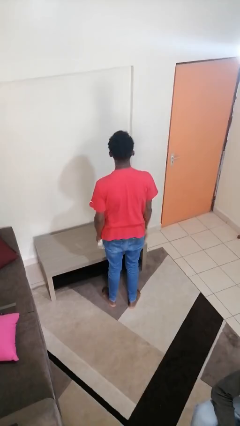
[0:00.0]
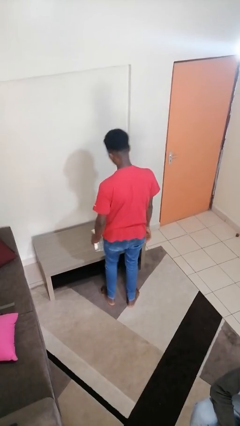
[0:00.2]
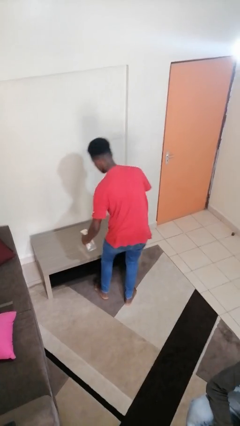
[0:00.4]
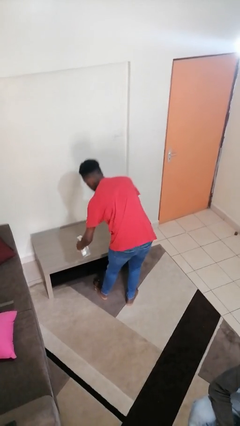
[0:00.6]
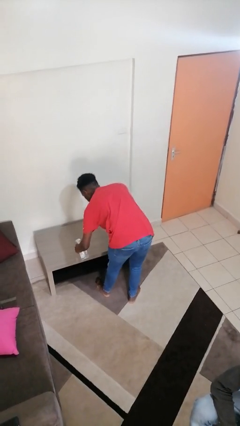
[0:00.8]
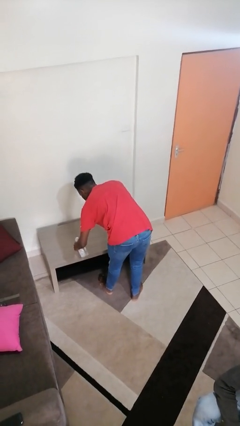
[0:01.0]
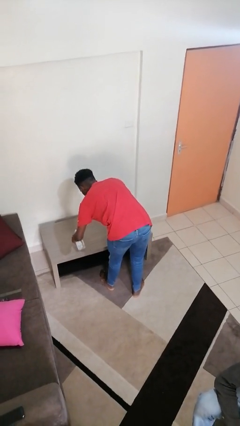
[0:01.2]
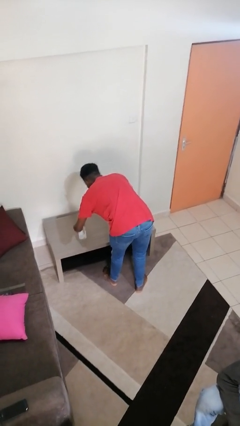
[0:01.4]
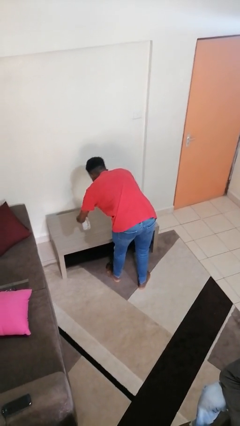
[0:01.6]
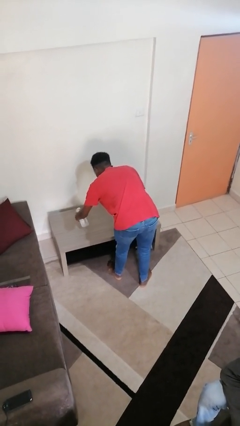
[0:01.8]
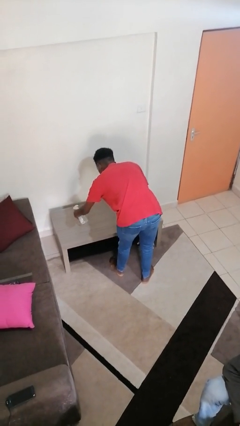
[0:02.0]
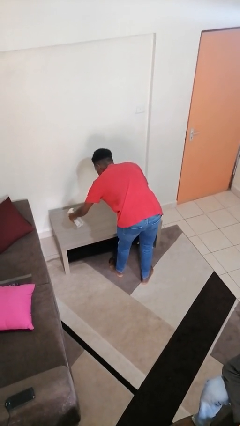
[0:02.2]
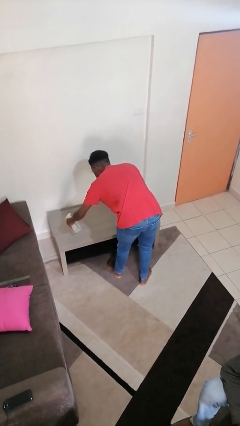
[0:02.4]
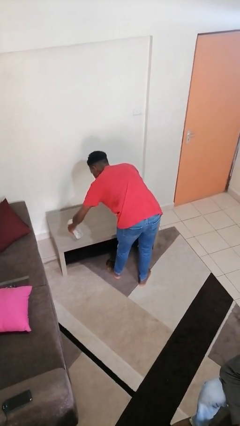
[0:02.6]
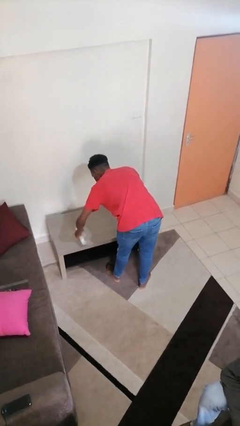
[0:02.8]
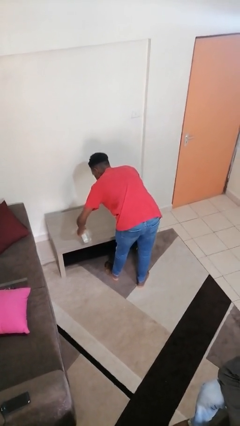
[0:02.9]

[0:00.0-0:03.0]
person sprays from bottle

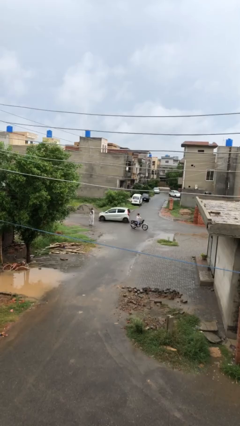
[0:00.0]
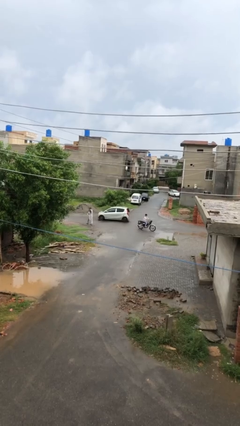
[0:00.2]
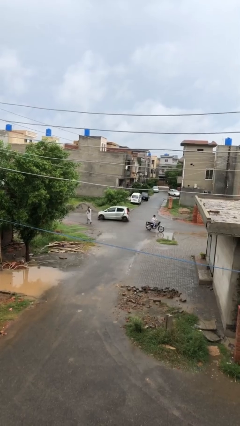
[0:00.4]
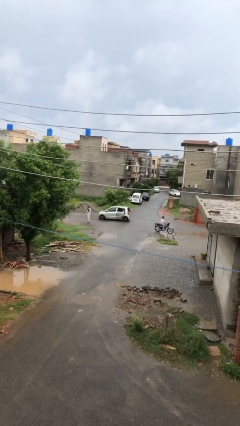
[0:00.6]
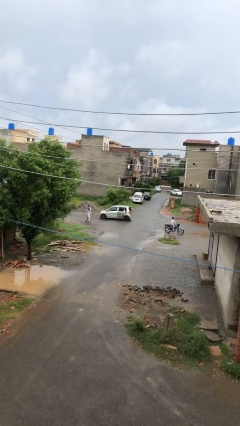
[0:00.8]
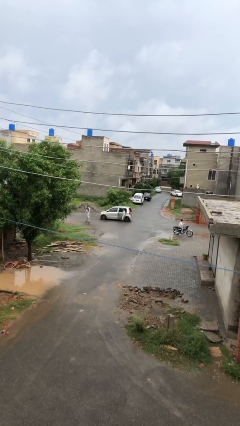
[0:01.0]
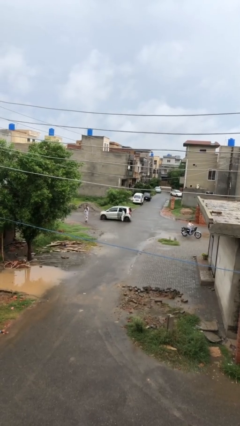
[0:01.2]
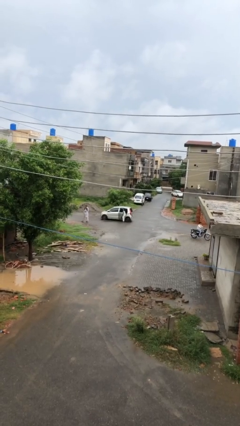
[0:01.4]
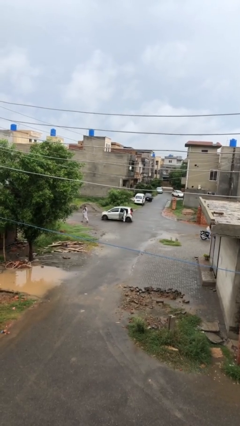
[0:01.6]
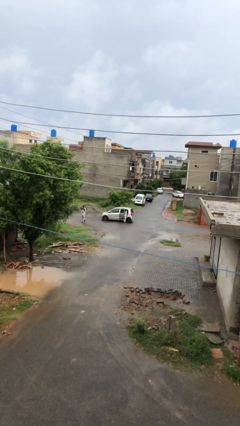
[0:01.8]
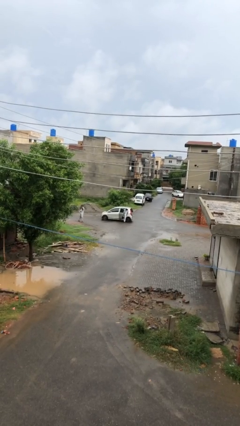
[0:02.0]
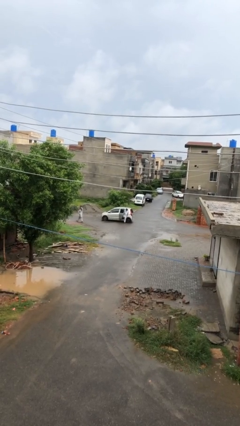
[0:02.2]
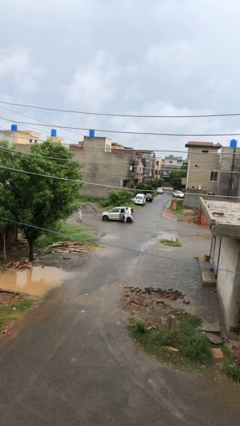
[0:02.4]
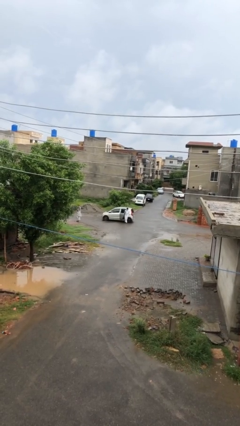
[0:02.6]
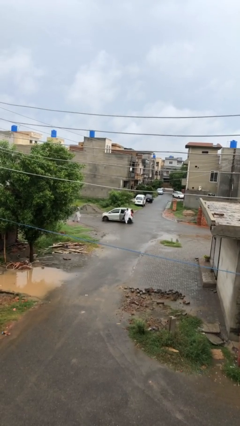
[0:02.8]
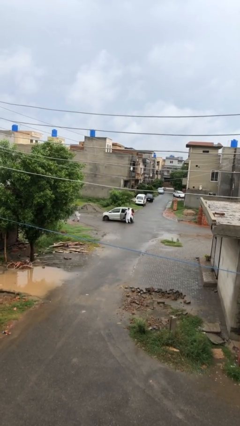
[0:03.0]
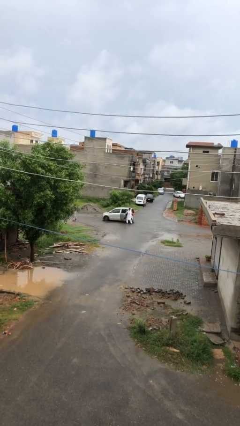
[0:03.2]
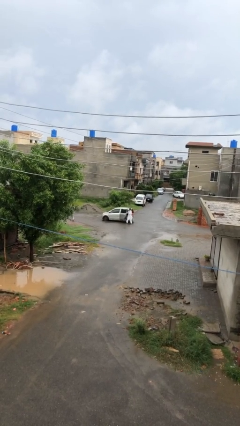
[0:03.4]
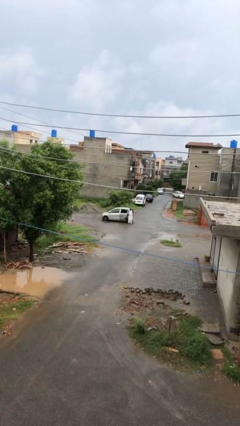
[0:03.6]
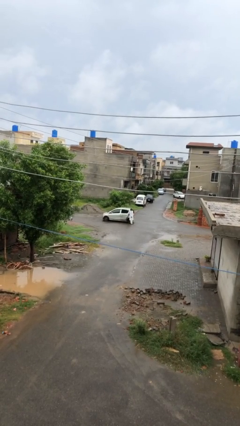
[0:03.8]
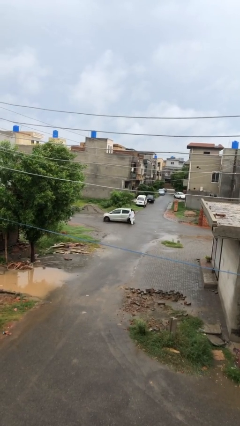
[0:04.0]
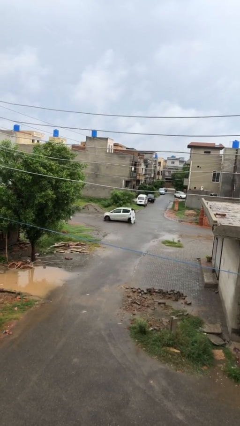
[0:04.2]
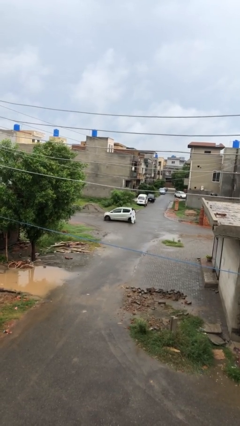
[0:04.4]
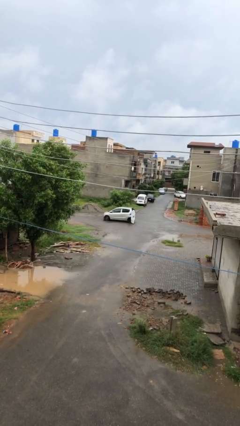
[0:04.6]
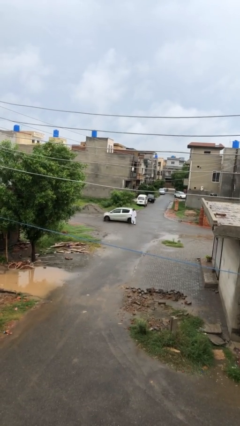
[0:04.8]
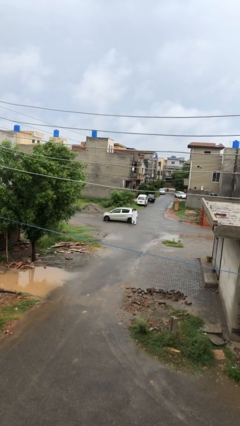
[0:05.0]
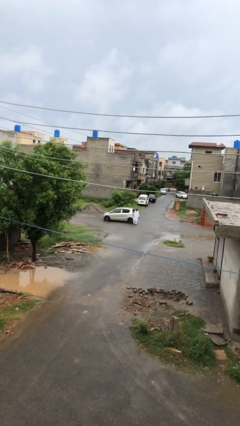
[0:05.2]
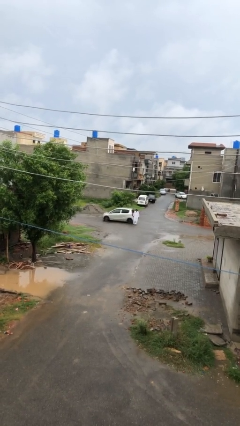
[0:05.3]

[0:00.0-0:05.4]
car drops off person

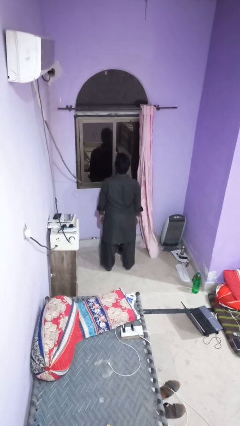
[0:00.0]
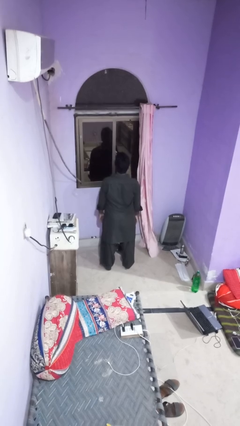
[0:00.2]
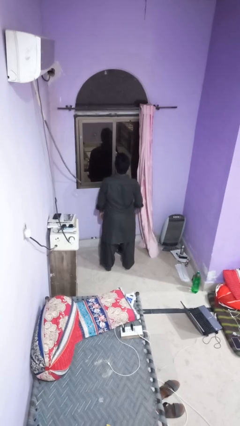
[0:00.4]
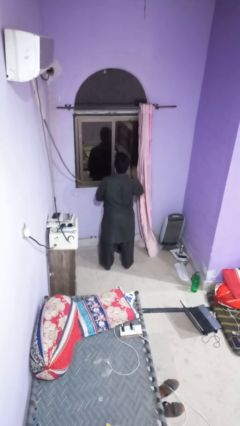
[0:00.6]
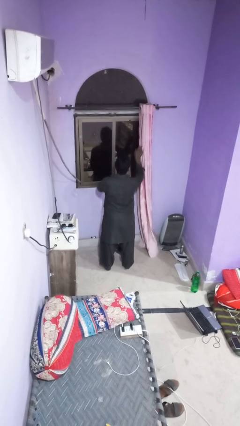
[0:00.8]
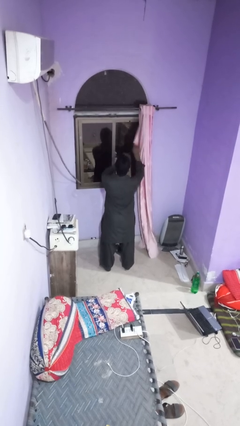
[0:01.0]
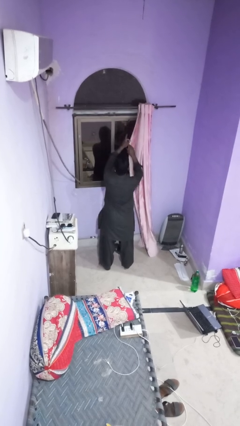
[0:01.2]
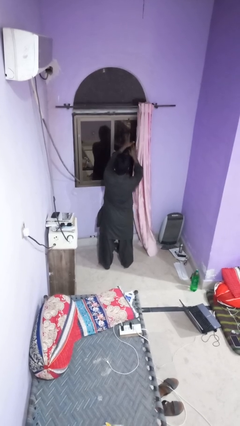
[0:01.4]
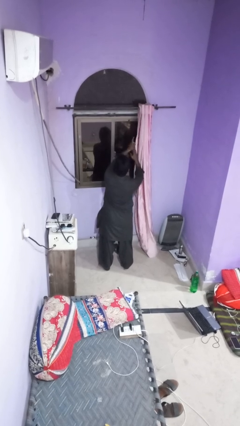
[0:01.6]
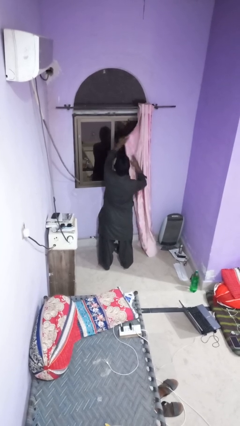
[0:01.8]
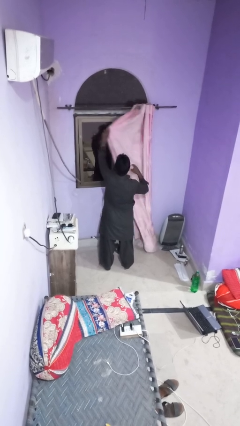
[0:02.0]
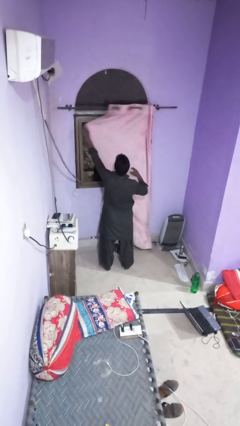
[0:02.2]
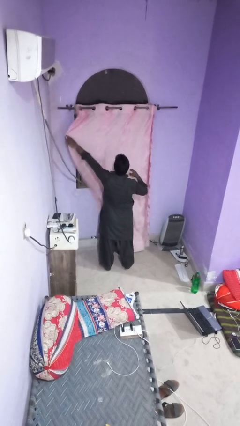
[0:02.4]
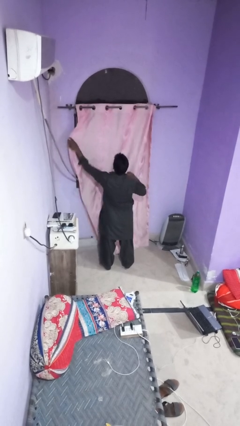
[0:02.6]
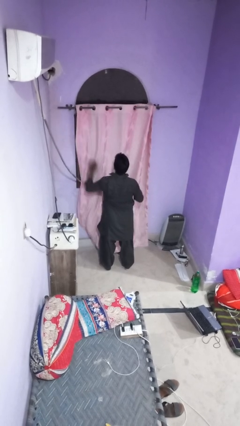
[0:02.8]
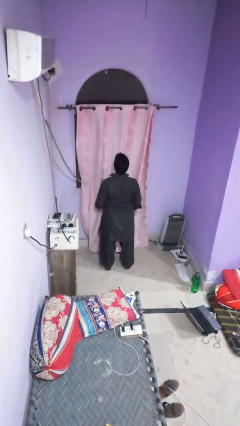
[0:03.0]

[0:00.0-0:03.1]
person closes curtains

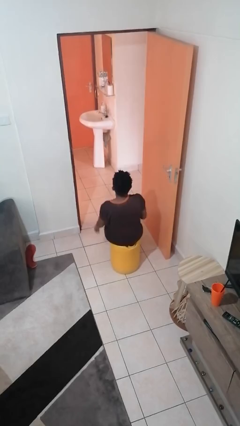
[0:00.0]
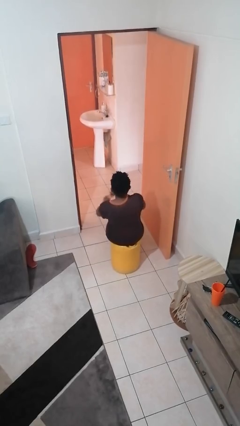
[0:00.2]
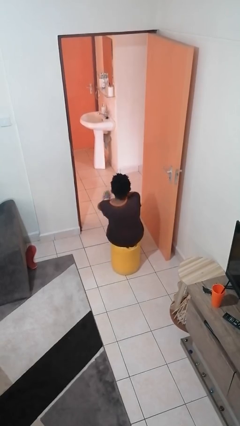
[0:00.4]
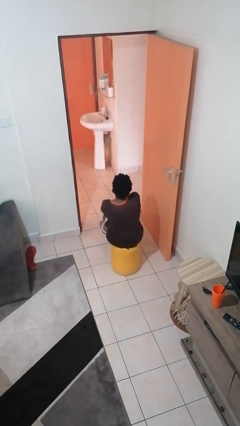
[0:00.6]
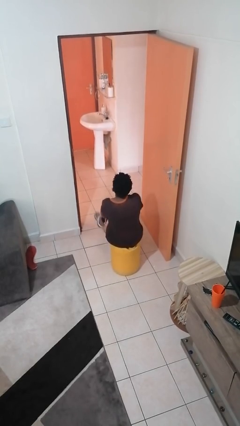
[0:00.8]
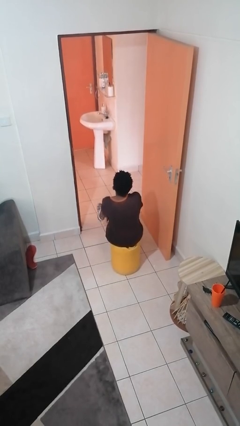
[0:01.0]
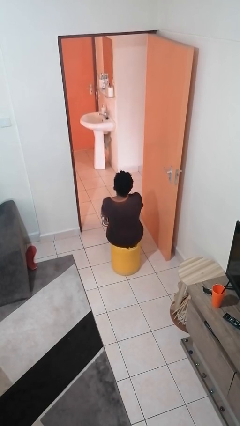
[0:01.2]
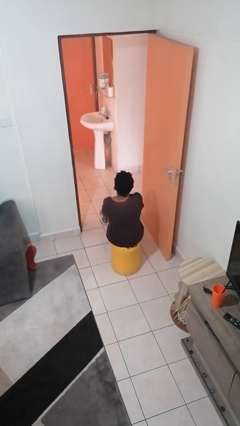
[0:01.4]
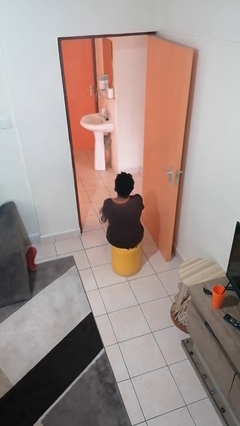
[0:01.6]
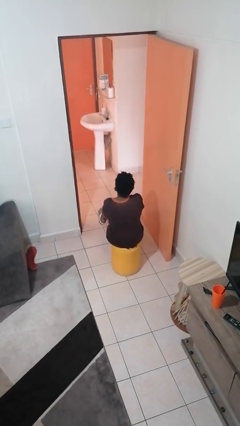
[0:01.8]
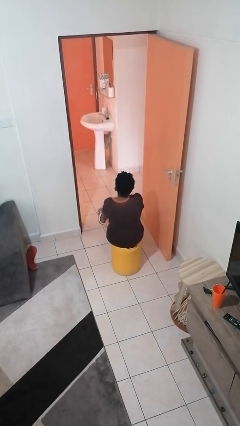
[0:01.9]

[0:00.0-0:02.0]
person crosses arms

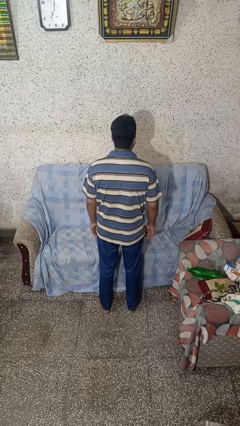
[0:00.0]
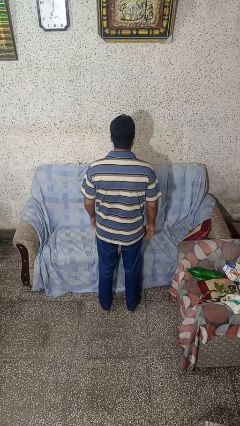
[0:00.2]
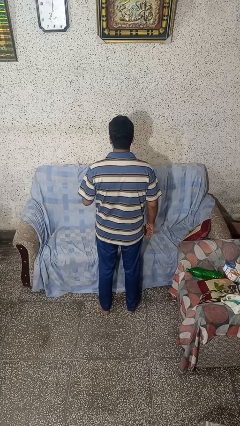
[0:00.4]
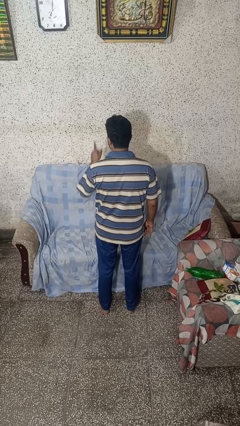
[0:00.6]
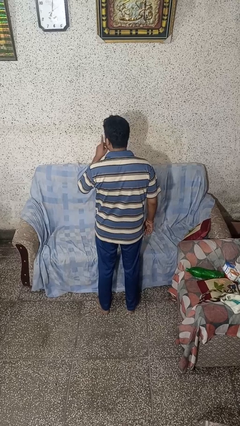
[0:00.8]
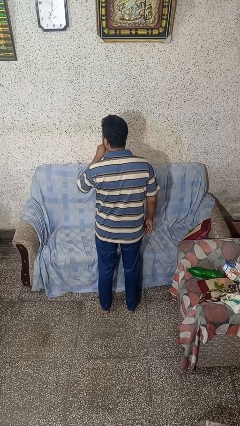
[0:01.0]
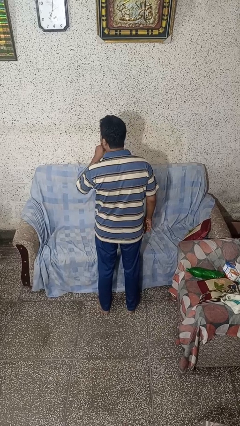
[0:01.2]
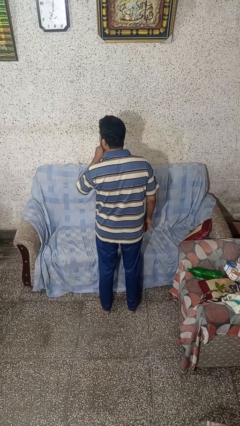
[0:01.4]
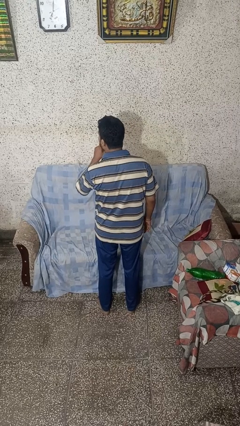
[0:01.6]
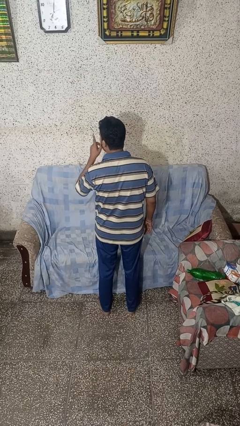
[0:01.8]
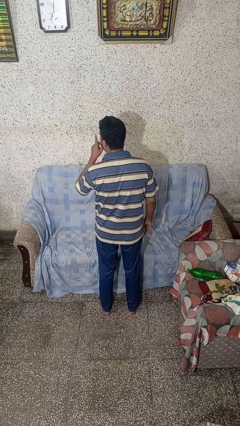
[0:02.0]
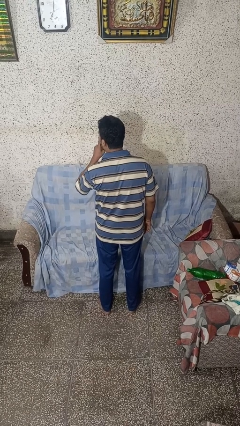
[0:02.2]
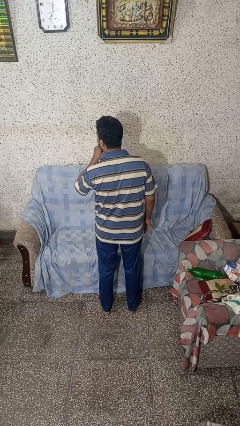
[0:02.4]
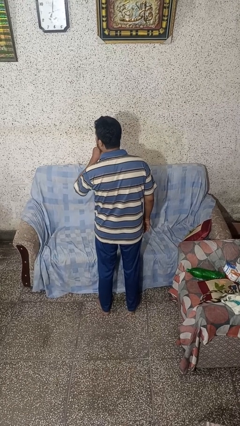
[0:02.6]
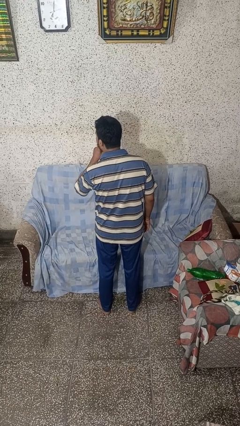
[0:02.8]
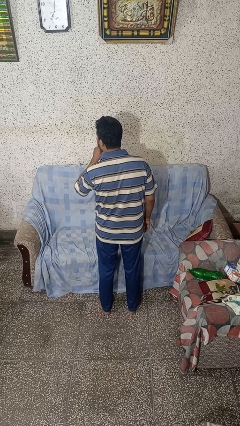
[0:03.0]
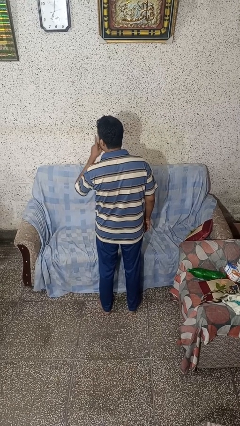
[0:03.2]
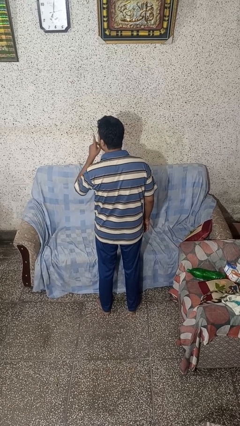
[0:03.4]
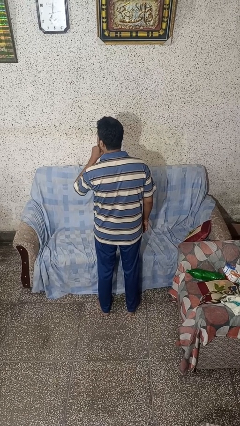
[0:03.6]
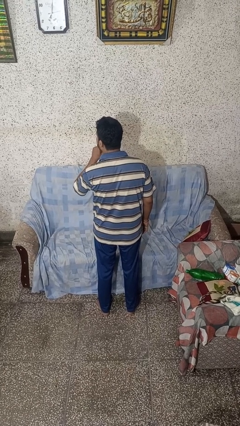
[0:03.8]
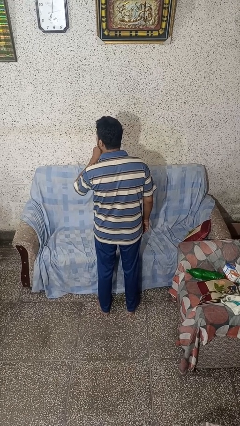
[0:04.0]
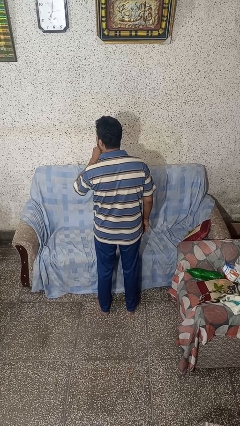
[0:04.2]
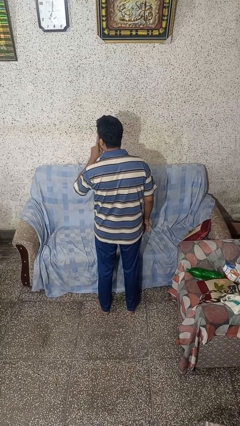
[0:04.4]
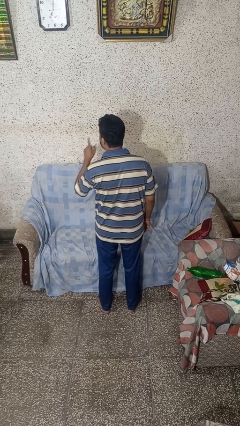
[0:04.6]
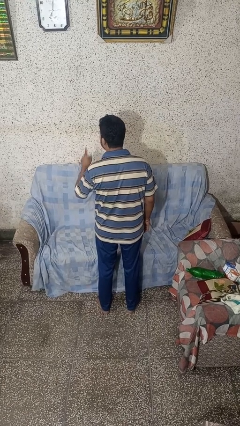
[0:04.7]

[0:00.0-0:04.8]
person gestures be quiet
